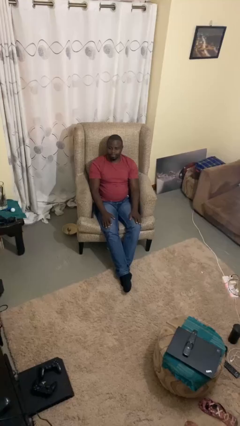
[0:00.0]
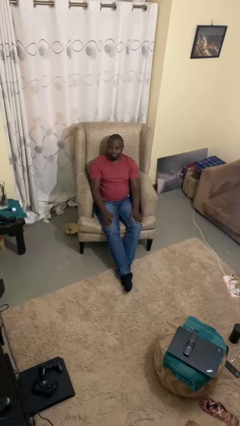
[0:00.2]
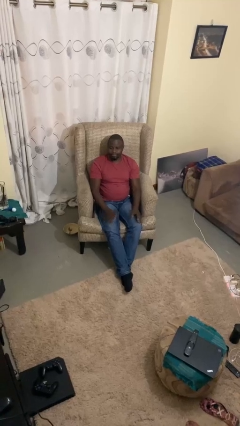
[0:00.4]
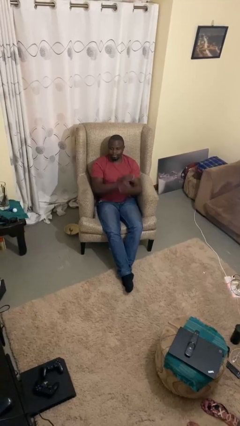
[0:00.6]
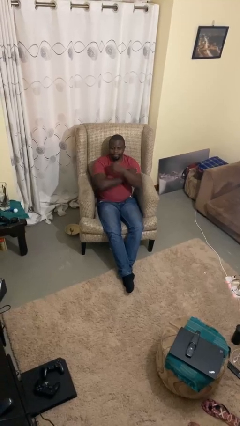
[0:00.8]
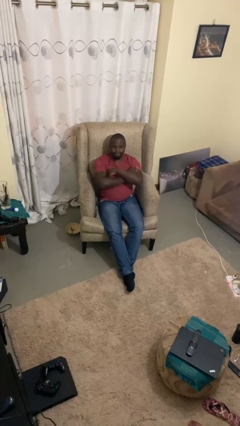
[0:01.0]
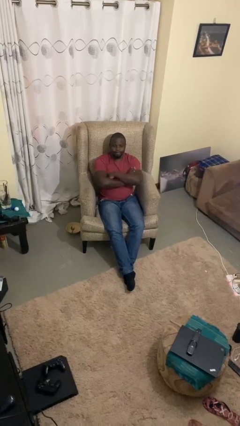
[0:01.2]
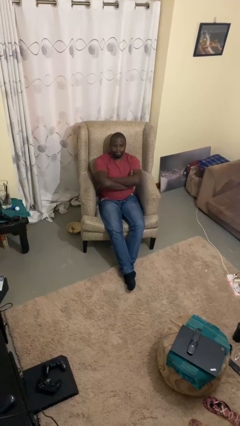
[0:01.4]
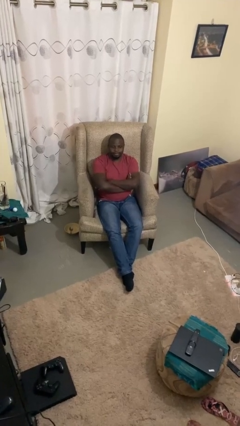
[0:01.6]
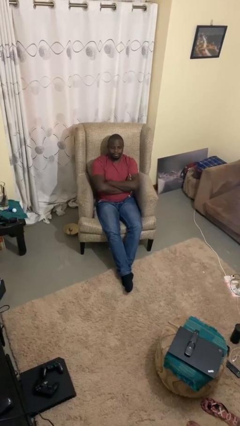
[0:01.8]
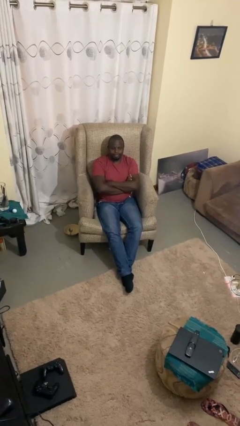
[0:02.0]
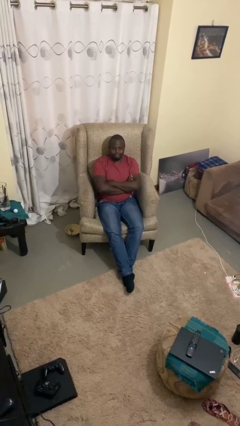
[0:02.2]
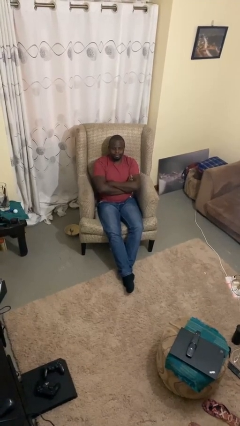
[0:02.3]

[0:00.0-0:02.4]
person crosses arms

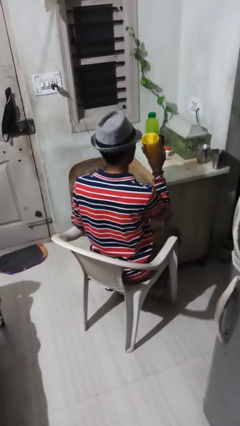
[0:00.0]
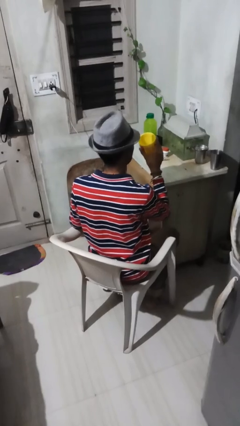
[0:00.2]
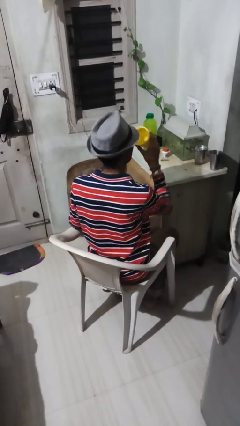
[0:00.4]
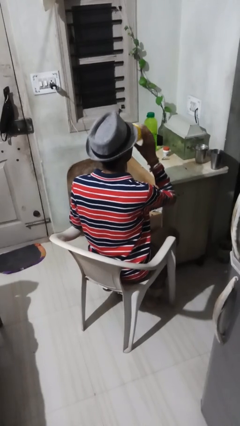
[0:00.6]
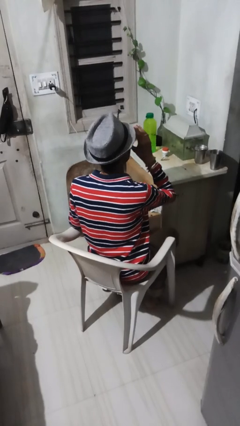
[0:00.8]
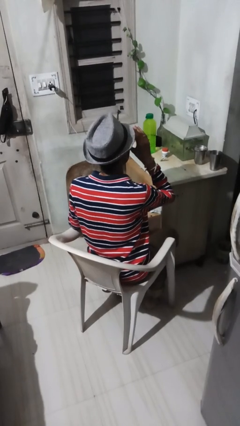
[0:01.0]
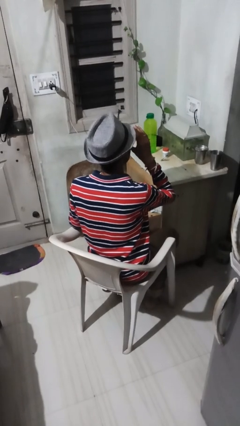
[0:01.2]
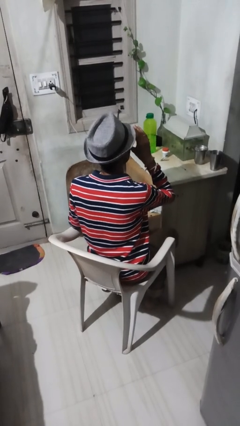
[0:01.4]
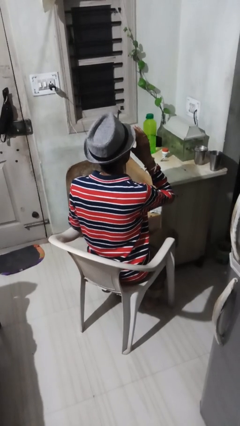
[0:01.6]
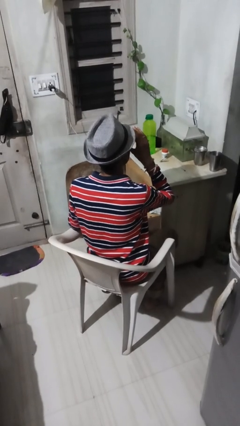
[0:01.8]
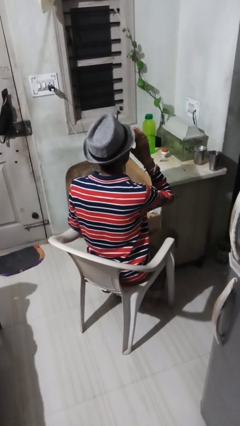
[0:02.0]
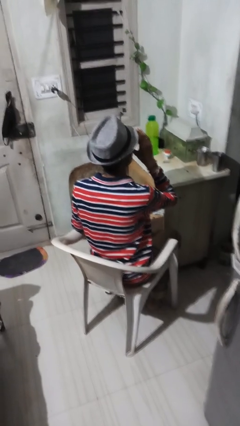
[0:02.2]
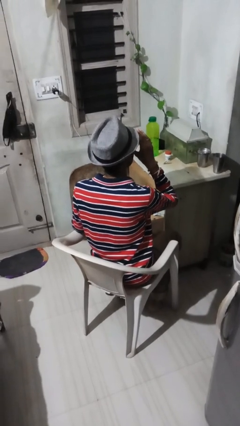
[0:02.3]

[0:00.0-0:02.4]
person drinks from mug

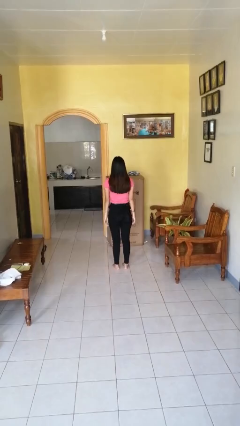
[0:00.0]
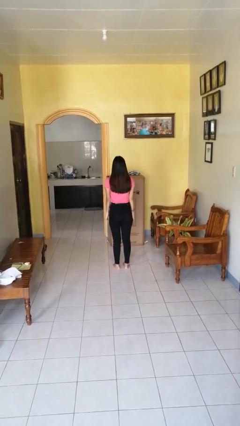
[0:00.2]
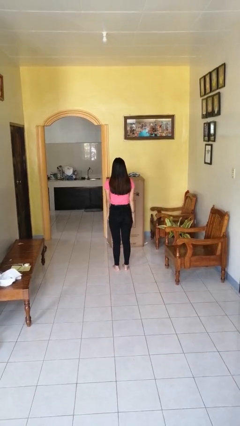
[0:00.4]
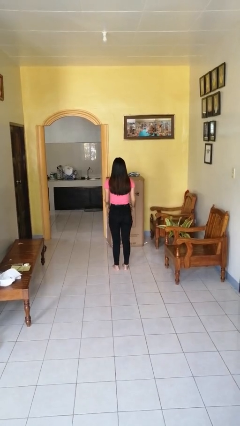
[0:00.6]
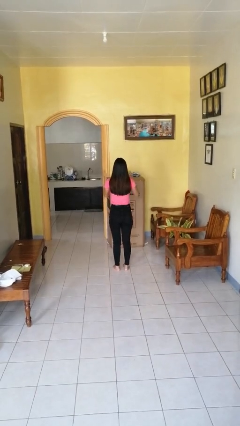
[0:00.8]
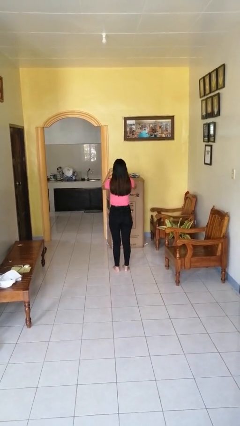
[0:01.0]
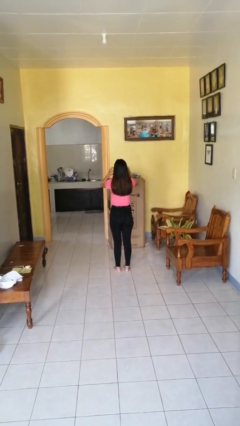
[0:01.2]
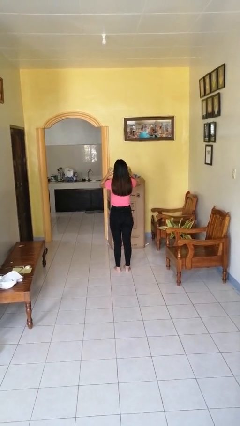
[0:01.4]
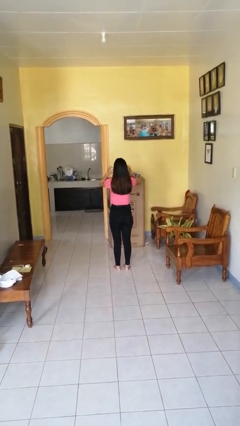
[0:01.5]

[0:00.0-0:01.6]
person puts fingers in ear

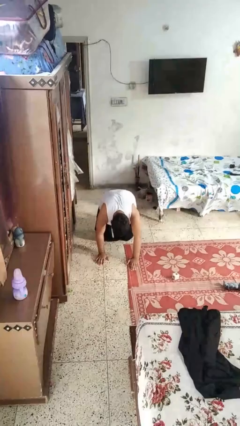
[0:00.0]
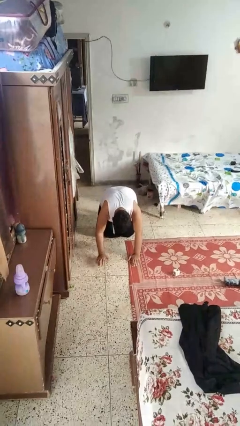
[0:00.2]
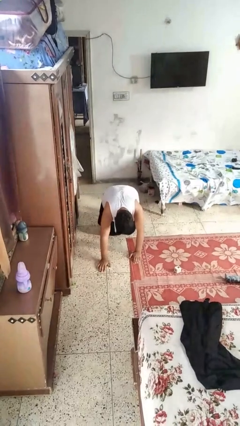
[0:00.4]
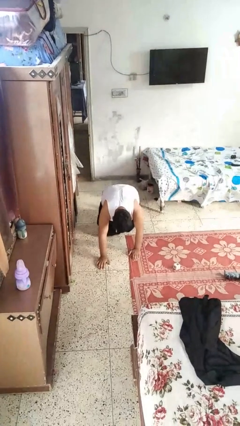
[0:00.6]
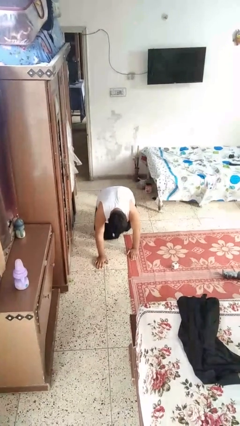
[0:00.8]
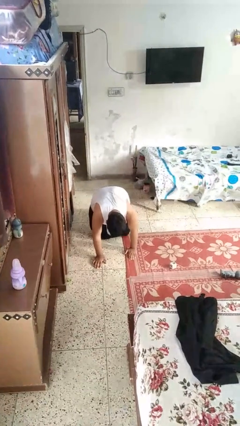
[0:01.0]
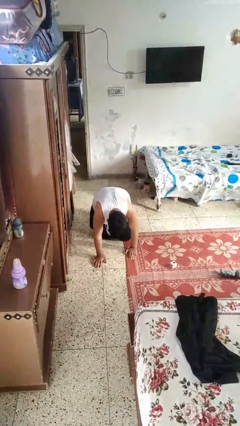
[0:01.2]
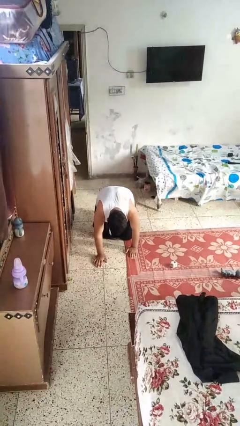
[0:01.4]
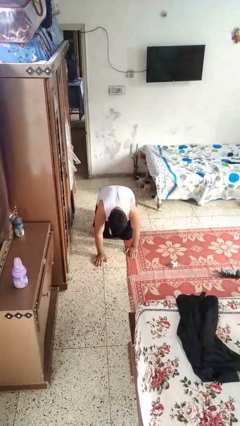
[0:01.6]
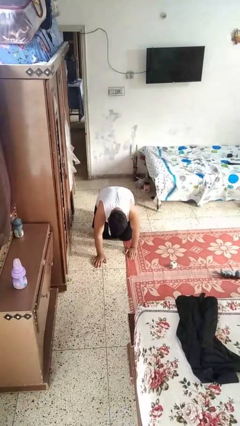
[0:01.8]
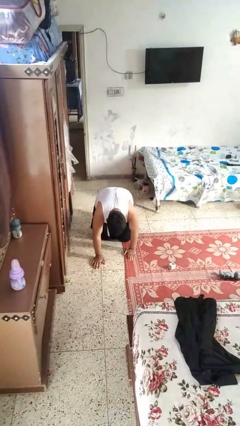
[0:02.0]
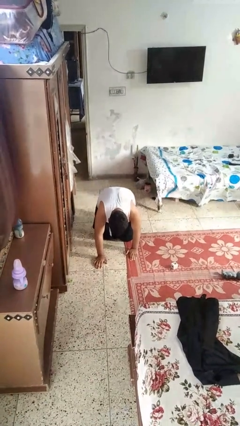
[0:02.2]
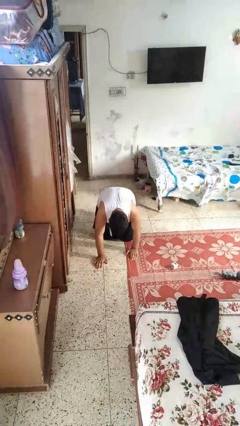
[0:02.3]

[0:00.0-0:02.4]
person crawls

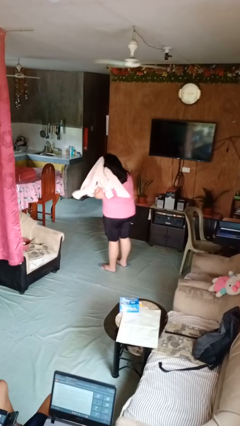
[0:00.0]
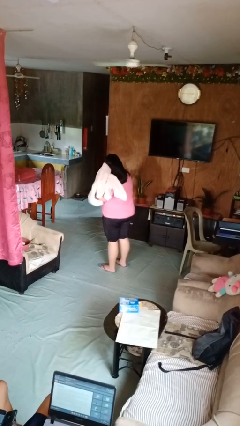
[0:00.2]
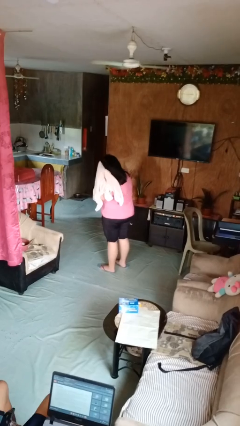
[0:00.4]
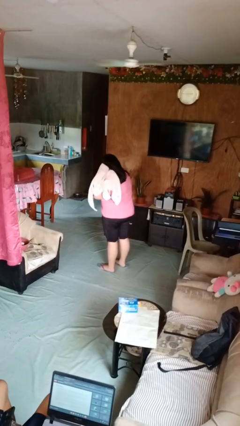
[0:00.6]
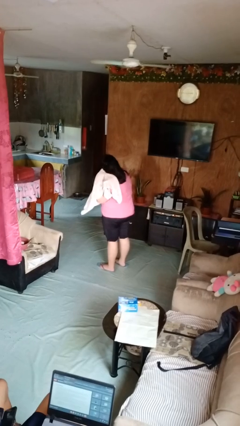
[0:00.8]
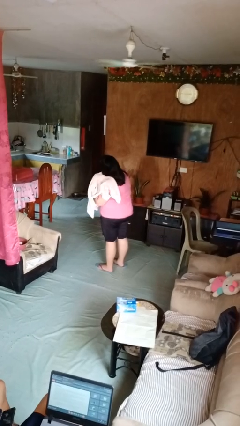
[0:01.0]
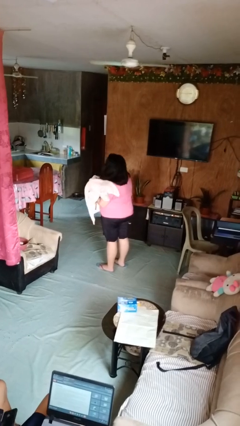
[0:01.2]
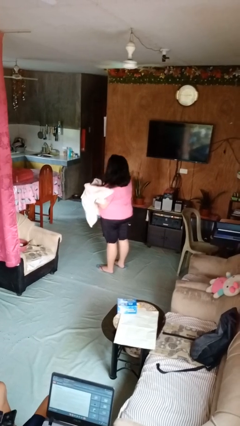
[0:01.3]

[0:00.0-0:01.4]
person dries hair with towel

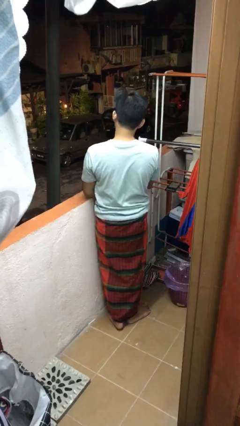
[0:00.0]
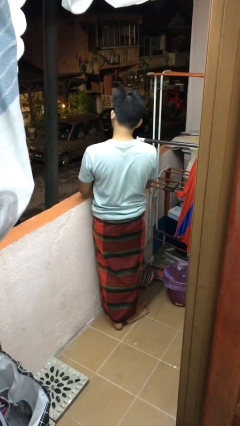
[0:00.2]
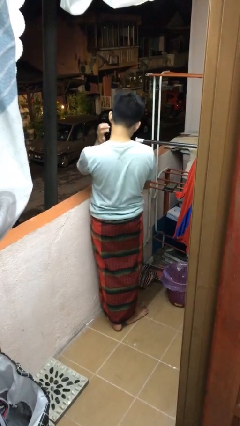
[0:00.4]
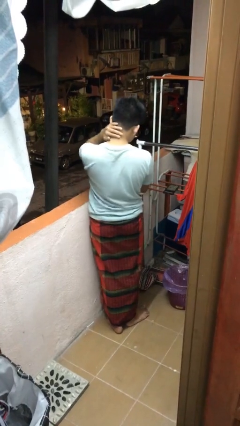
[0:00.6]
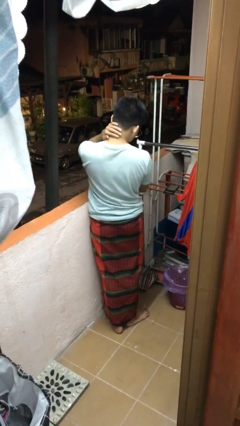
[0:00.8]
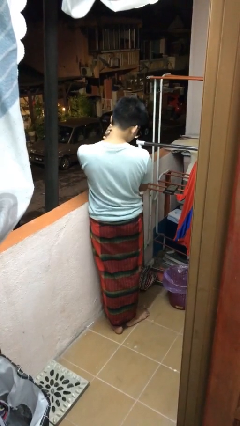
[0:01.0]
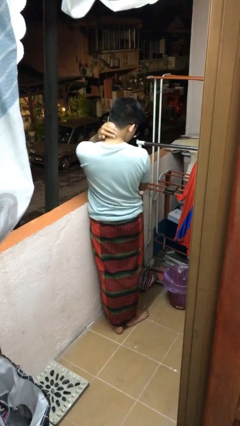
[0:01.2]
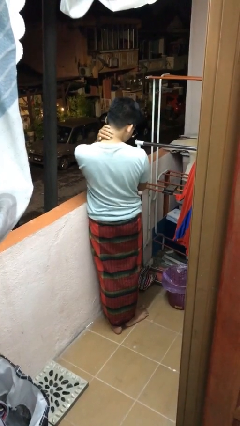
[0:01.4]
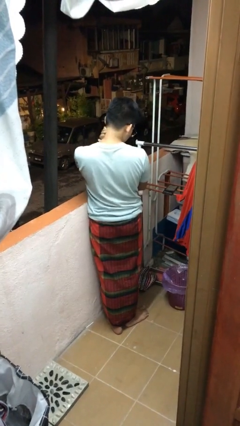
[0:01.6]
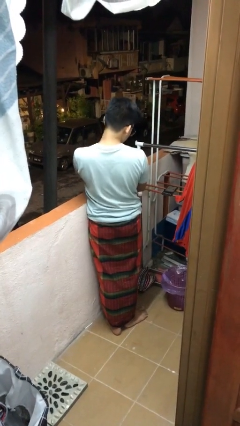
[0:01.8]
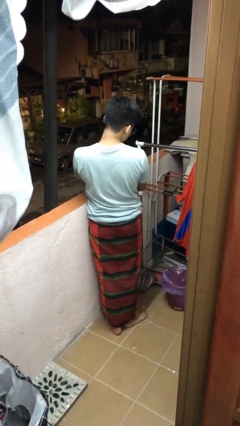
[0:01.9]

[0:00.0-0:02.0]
person rubs neck

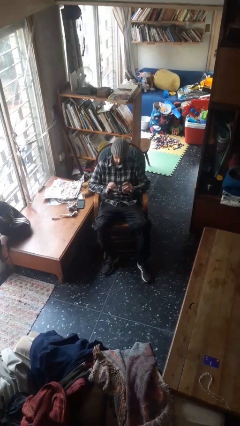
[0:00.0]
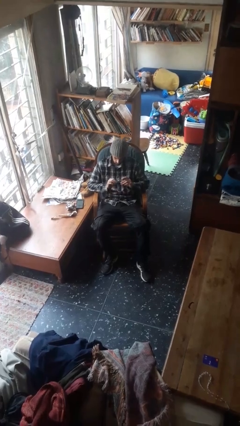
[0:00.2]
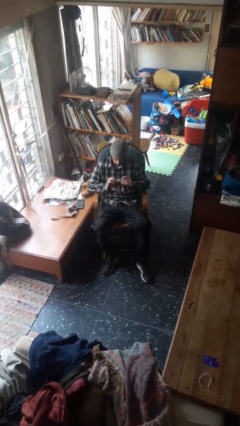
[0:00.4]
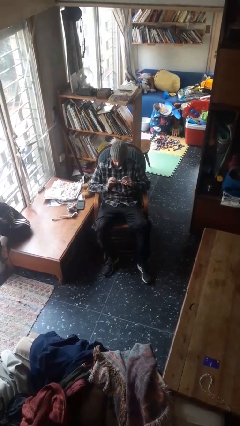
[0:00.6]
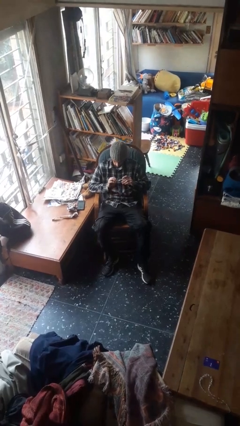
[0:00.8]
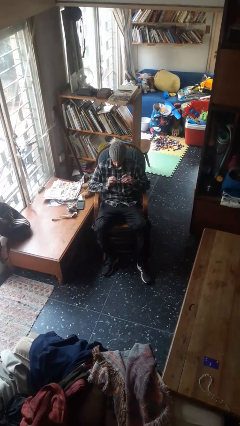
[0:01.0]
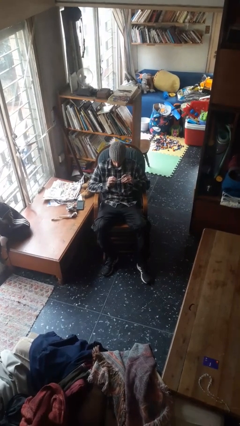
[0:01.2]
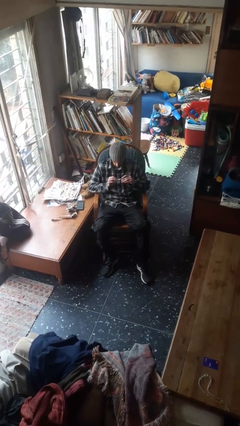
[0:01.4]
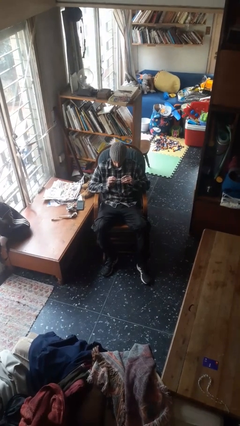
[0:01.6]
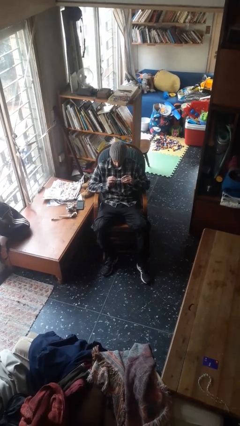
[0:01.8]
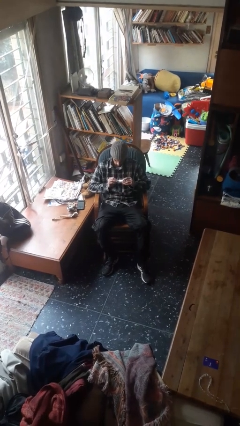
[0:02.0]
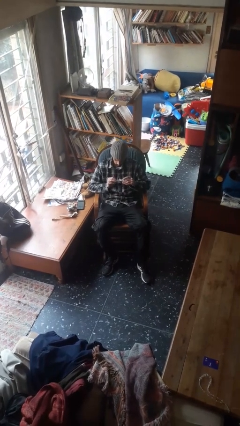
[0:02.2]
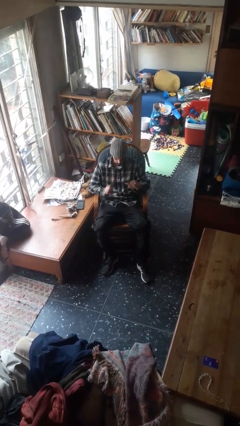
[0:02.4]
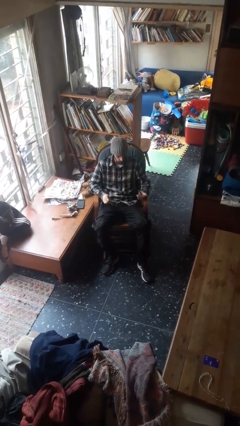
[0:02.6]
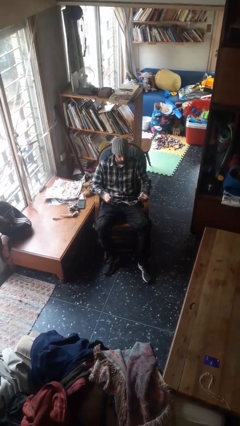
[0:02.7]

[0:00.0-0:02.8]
person clips fingernails

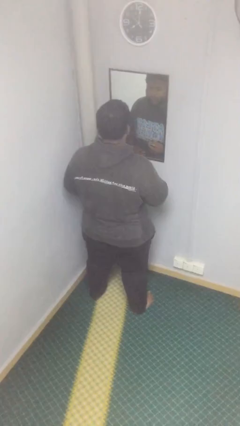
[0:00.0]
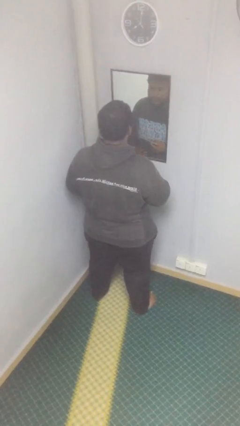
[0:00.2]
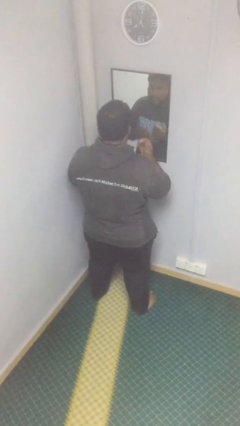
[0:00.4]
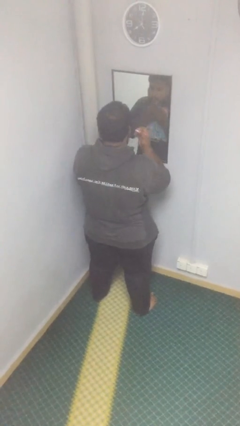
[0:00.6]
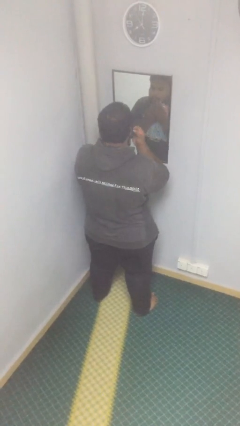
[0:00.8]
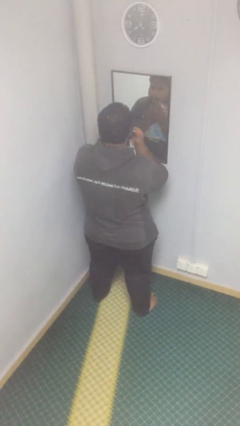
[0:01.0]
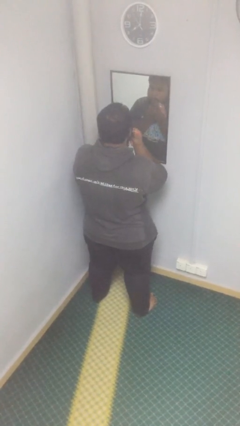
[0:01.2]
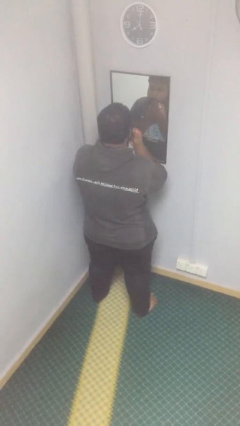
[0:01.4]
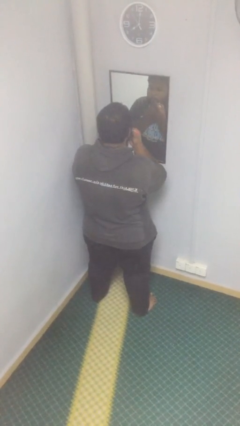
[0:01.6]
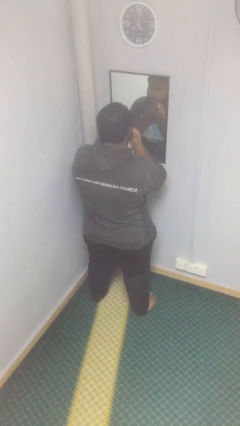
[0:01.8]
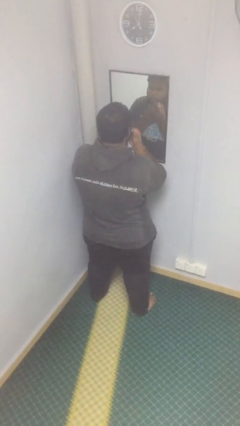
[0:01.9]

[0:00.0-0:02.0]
person applies lip makeup
